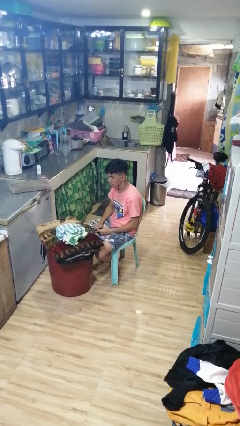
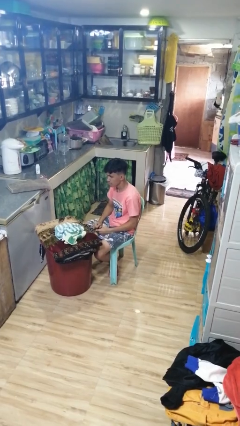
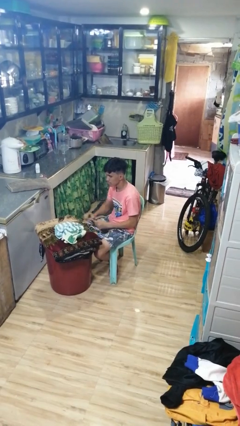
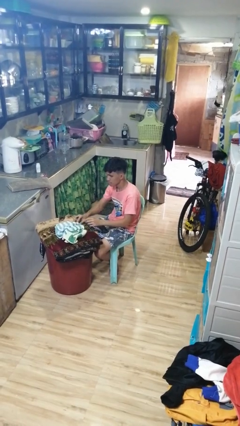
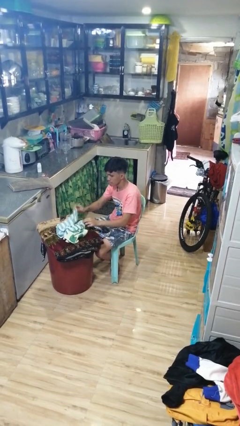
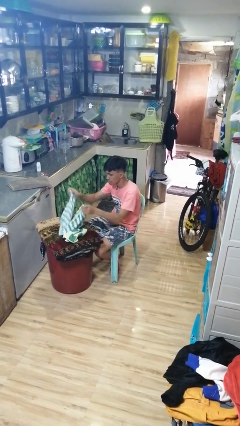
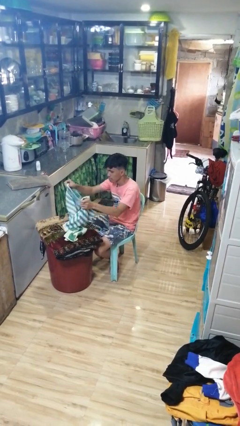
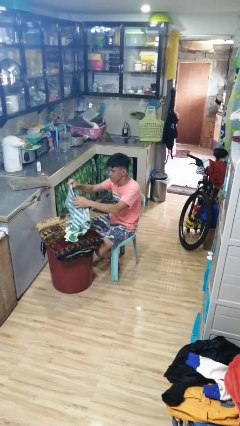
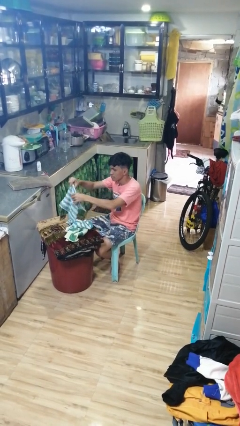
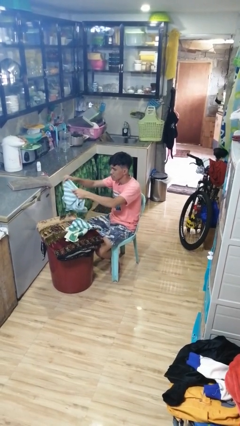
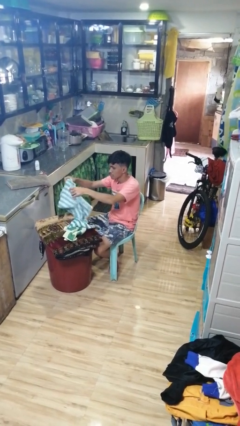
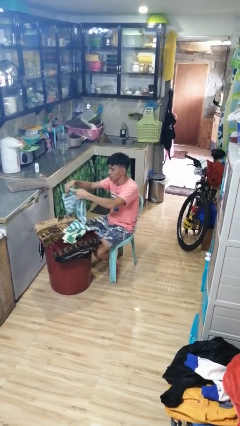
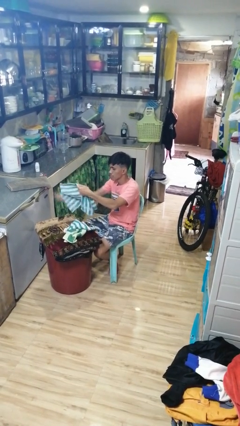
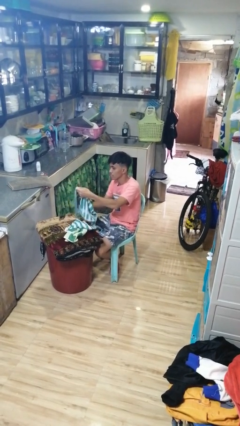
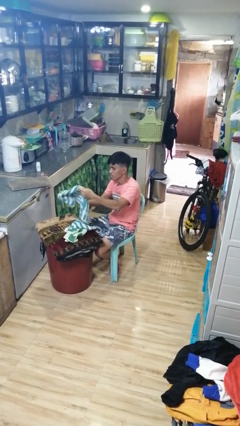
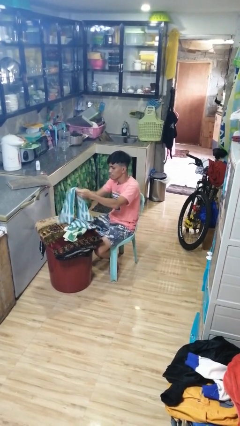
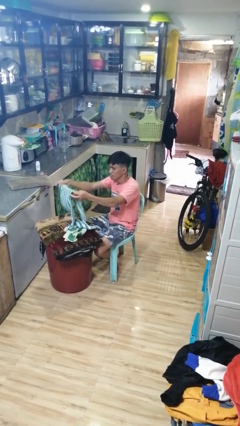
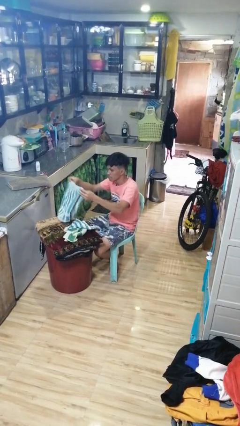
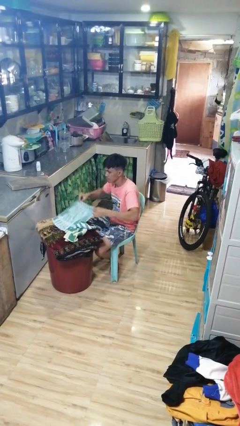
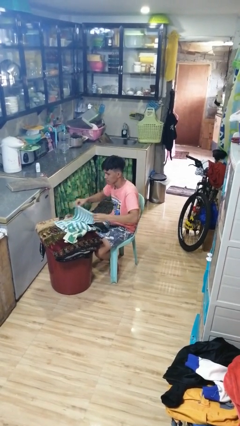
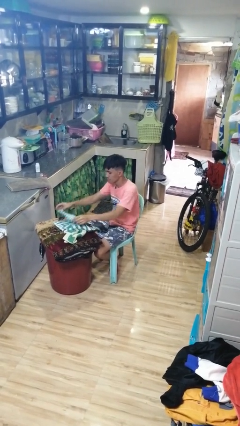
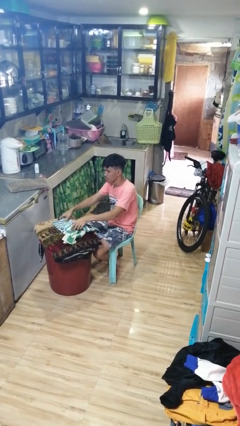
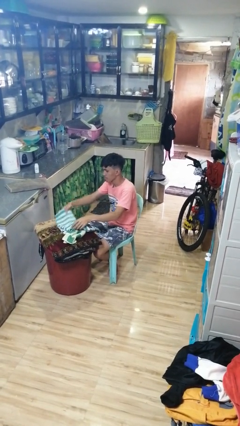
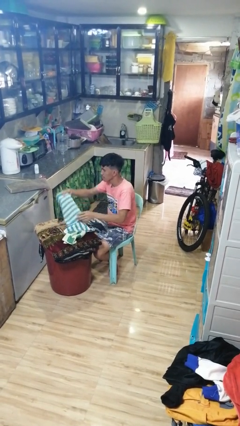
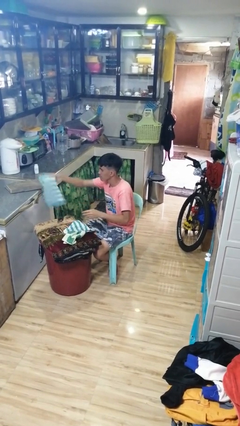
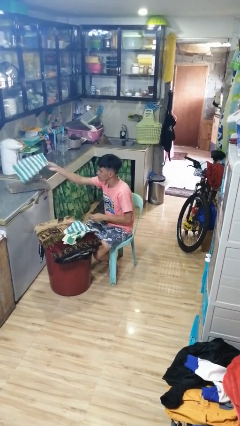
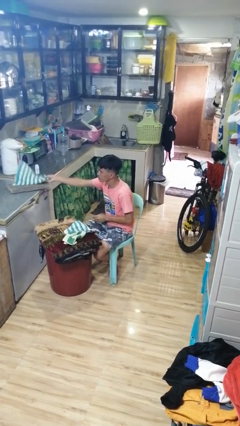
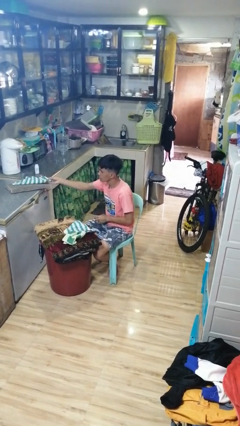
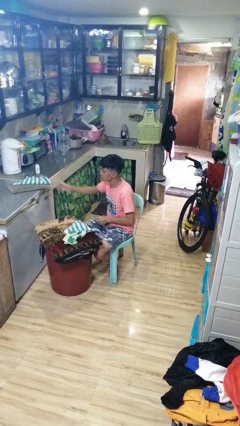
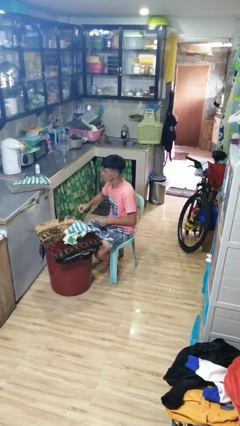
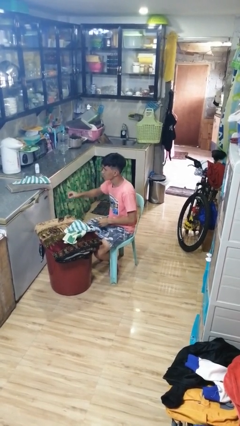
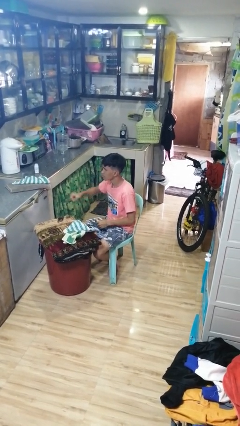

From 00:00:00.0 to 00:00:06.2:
person folds towel

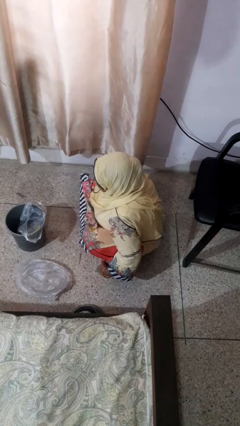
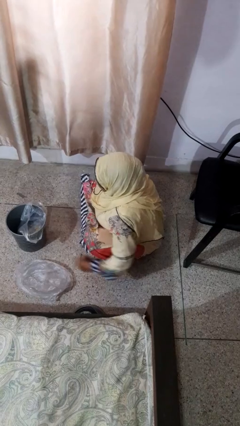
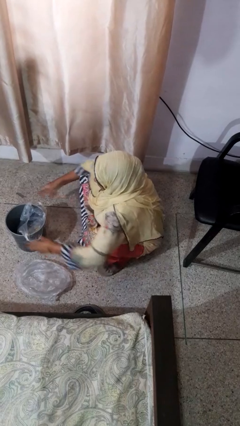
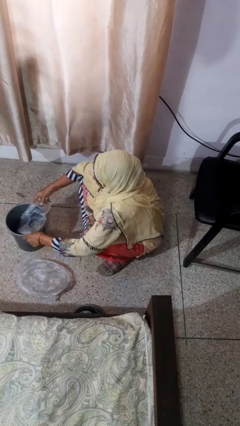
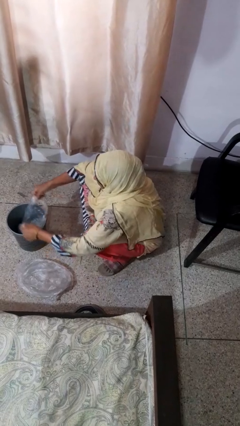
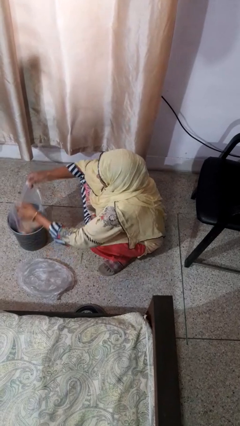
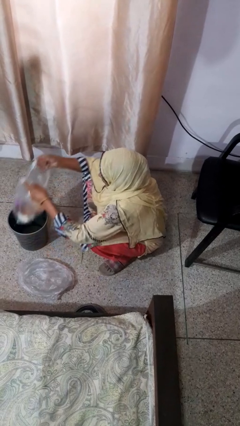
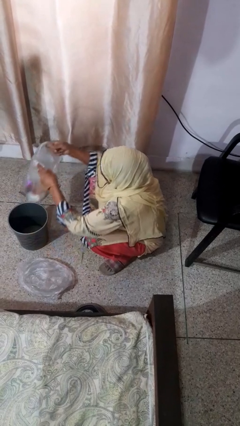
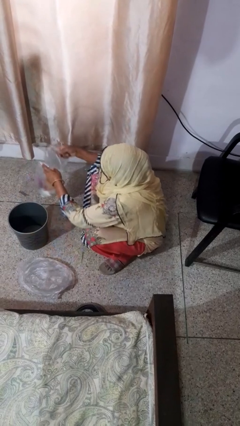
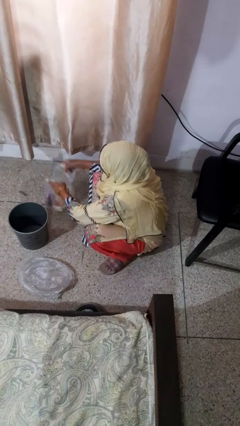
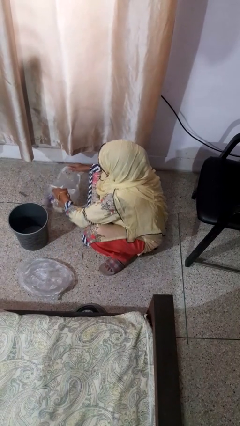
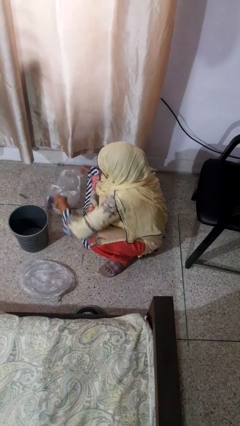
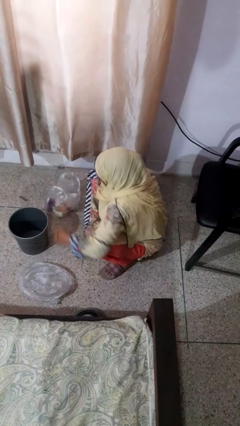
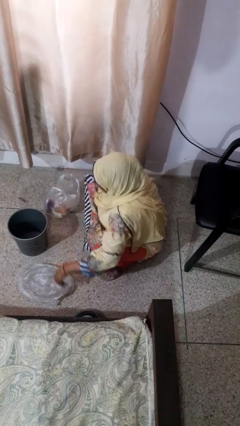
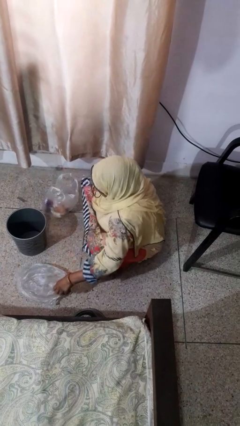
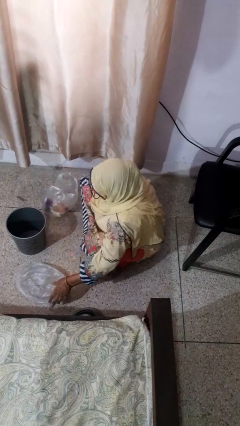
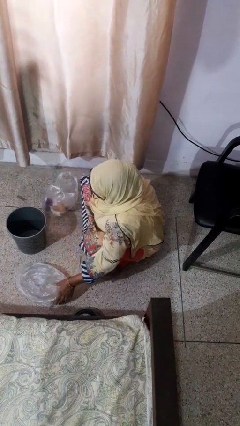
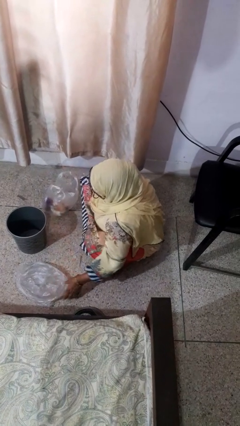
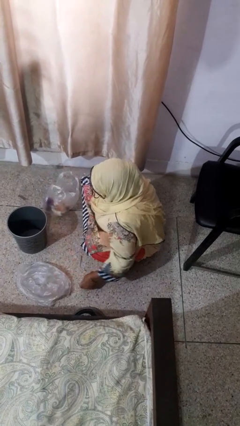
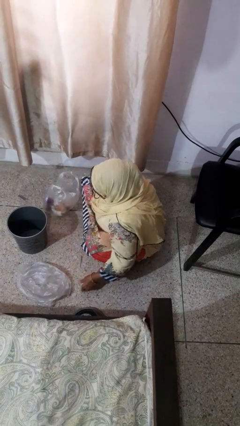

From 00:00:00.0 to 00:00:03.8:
person removes trashbag from trashcan

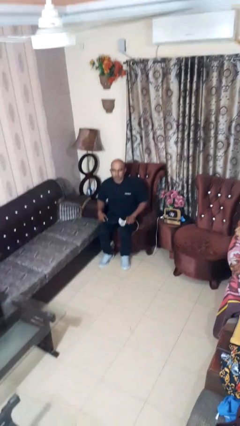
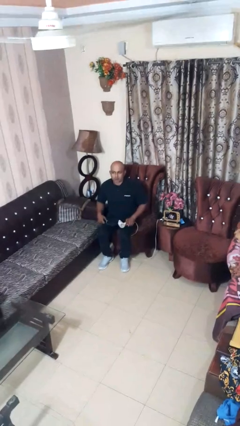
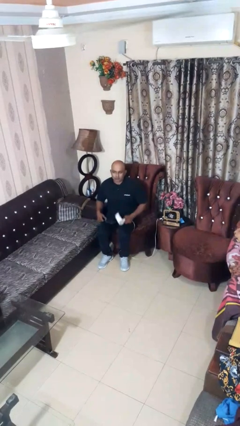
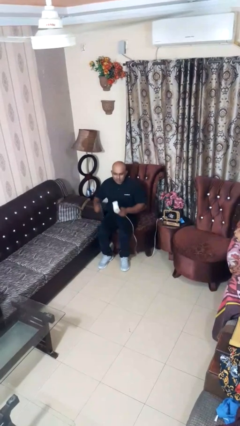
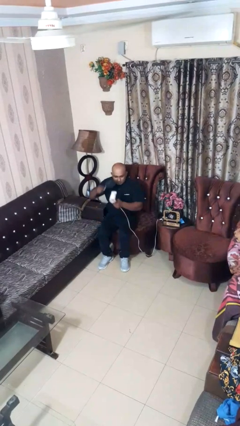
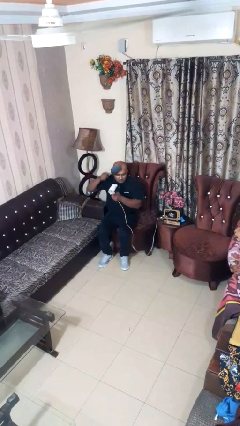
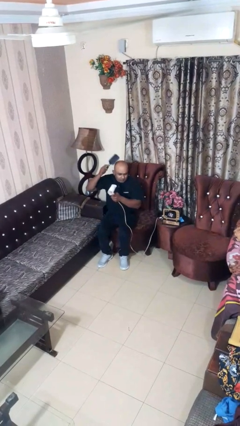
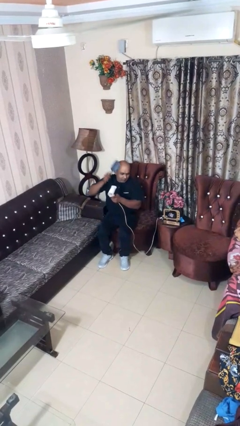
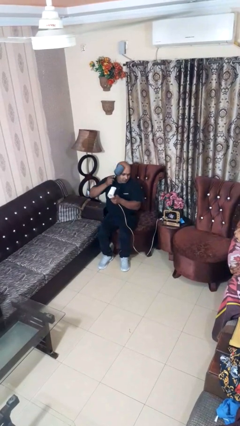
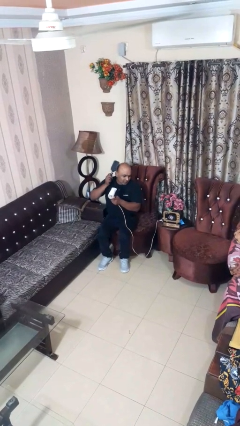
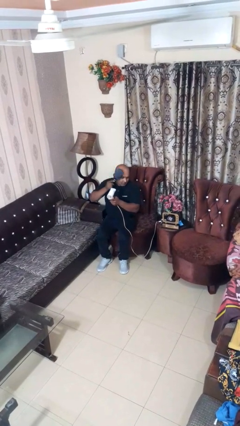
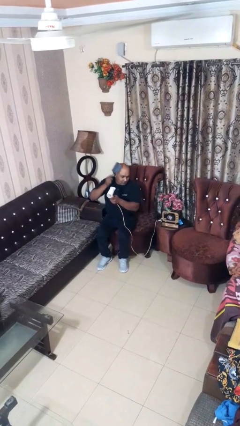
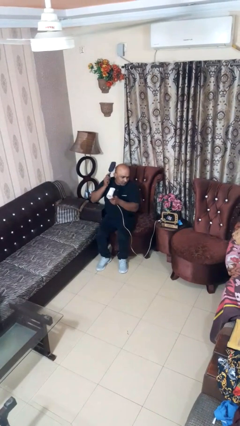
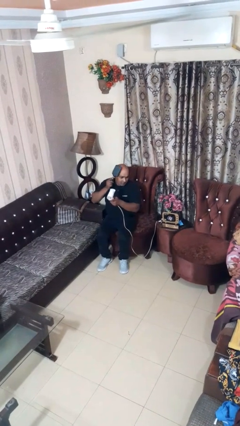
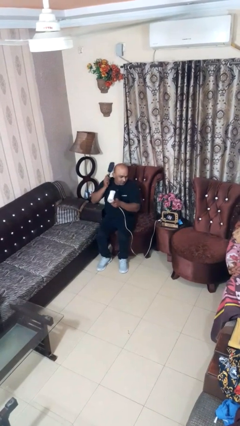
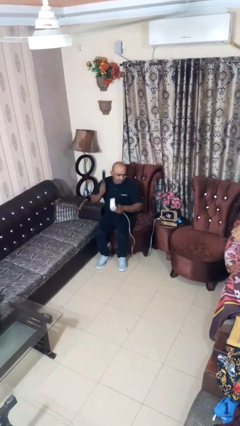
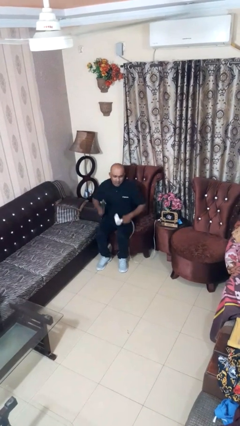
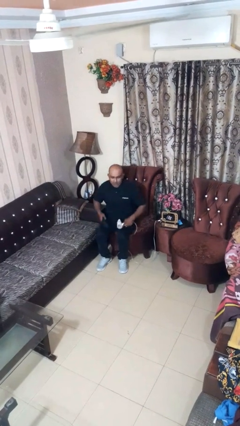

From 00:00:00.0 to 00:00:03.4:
person dries hair with hairdryer

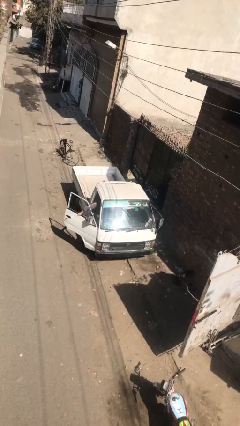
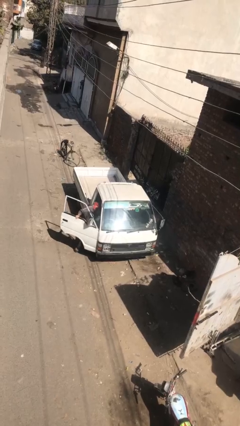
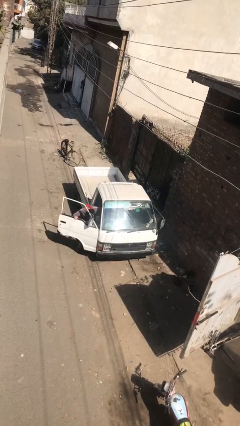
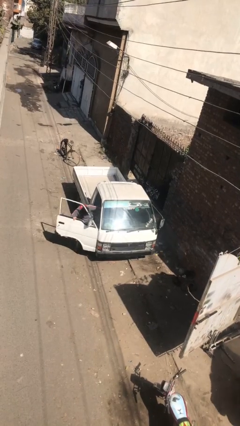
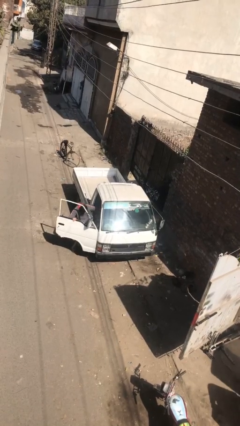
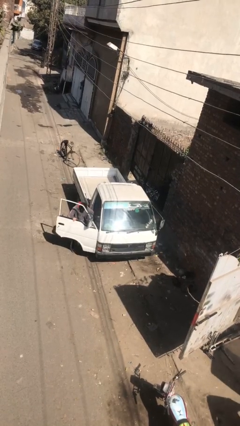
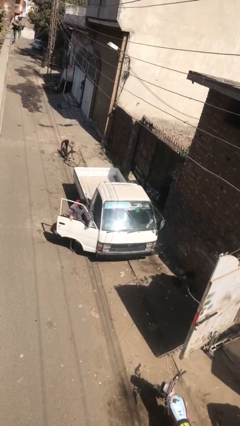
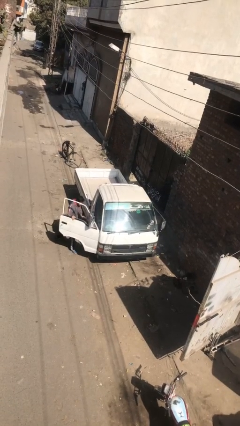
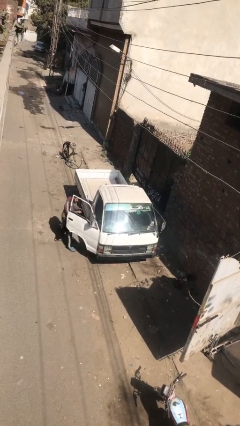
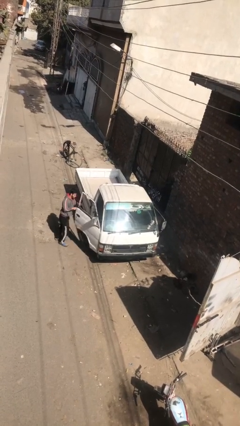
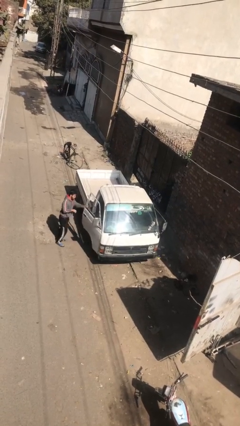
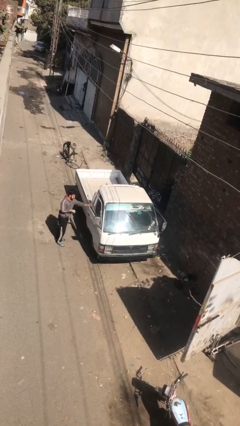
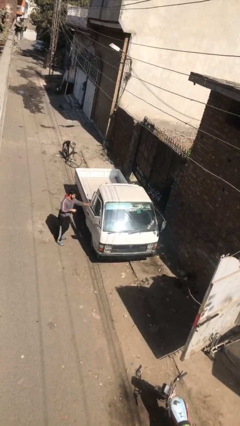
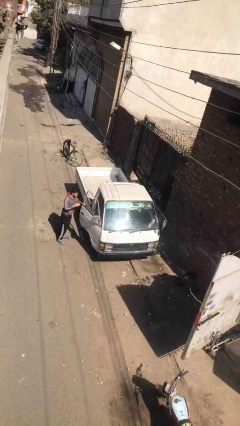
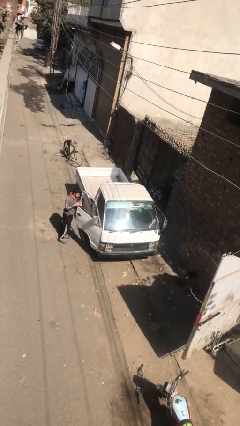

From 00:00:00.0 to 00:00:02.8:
car drops off person

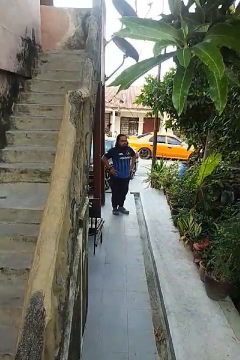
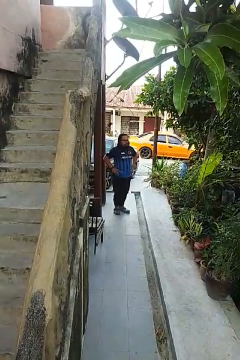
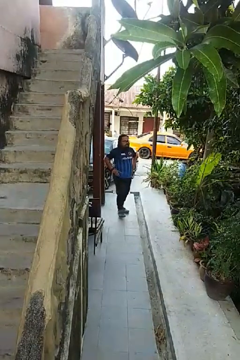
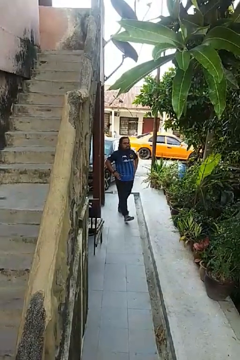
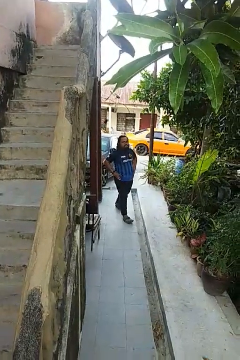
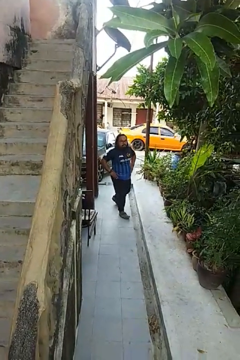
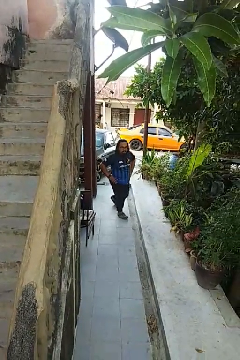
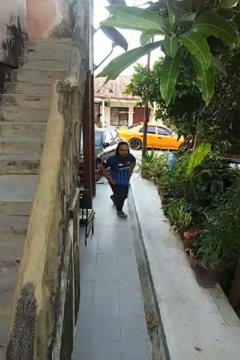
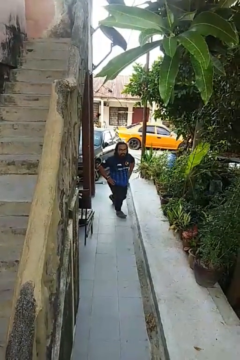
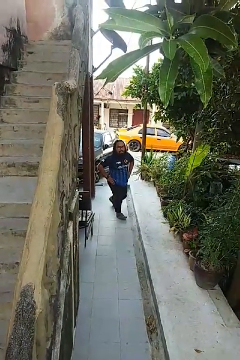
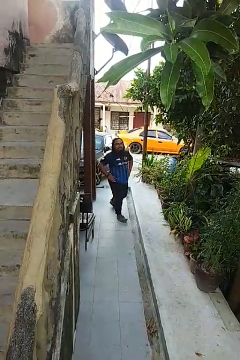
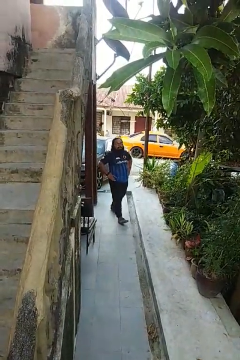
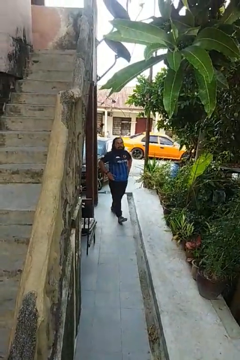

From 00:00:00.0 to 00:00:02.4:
person exercises with lunges
